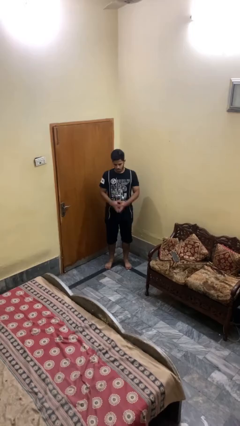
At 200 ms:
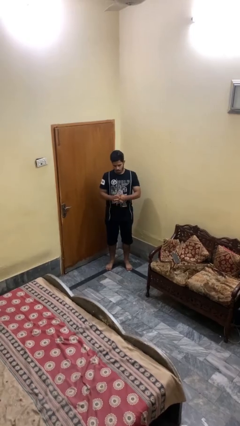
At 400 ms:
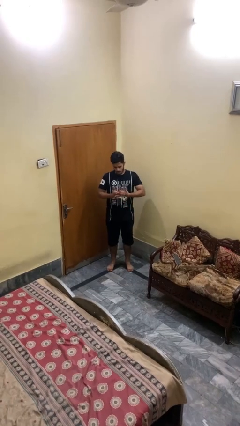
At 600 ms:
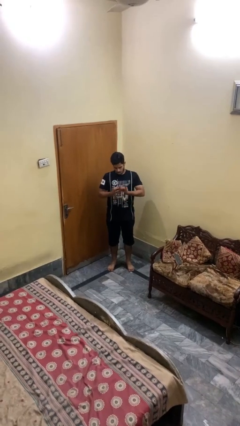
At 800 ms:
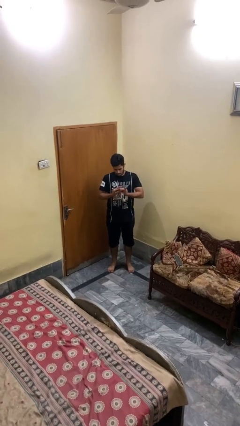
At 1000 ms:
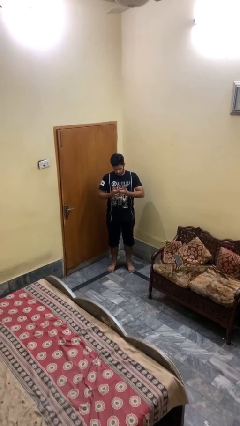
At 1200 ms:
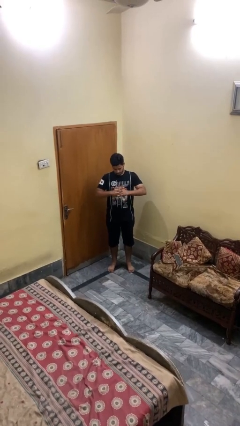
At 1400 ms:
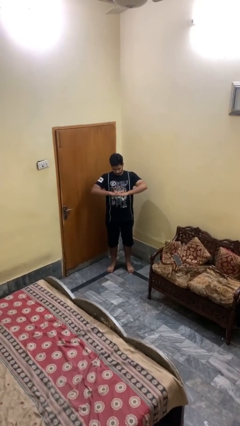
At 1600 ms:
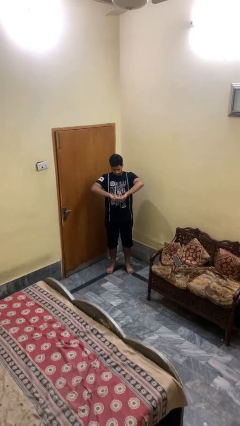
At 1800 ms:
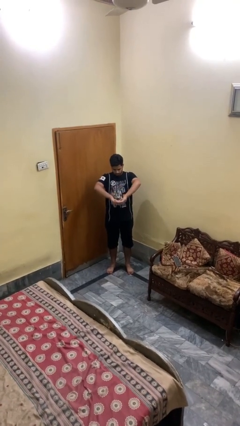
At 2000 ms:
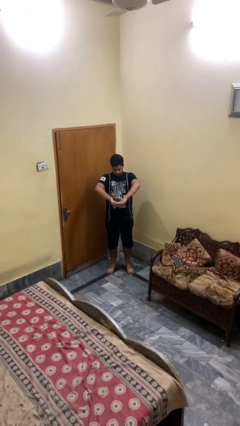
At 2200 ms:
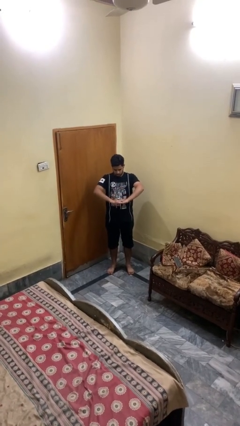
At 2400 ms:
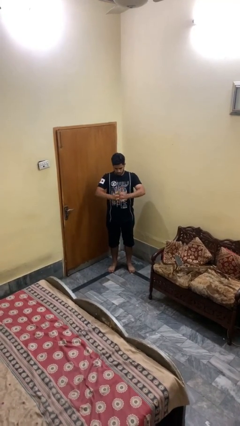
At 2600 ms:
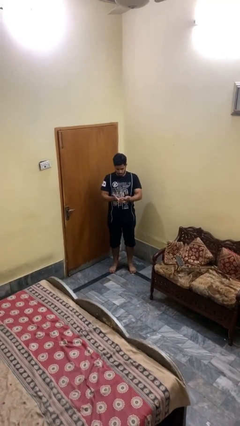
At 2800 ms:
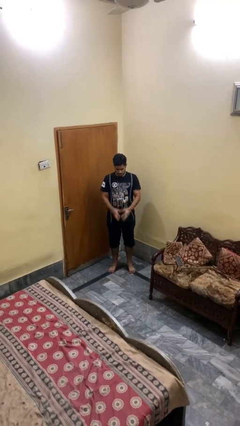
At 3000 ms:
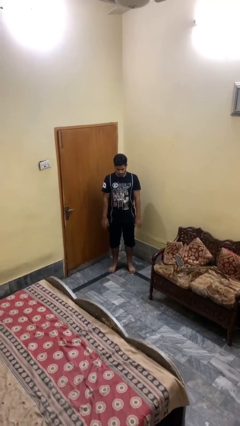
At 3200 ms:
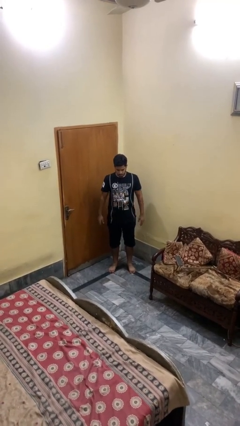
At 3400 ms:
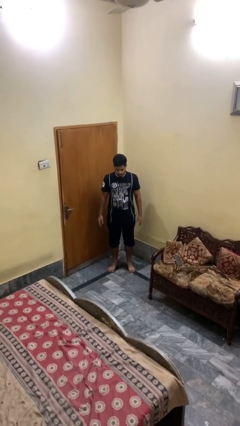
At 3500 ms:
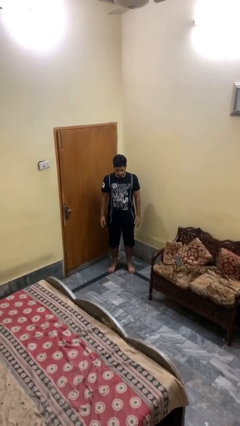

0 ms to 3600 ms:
person cracks knuckles

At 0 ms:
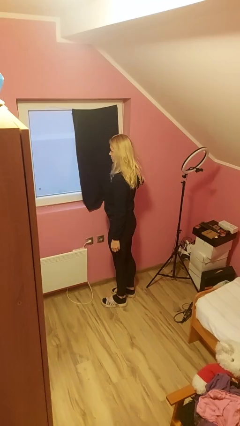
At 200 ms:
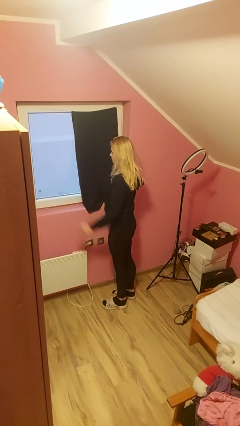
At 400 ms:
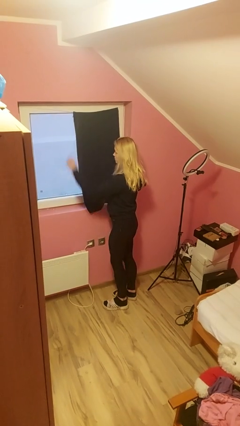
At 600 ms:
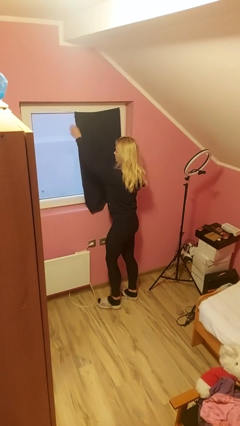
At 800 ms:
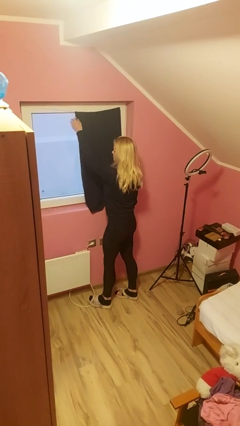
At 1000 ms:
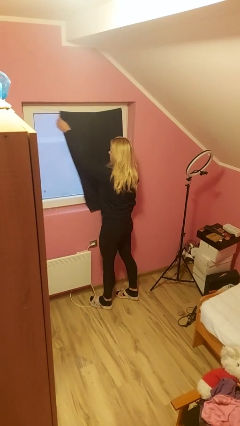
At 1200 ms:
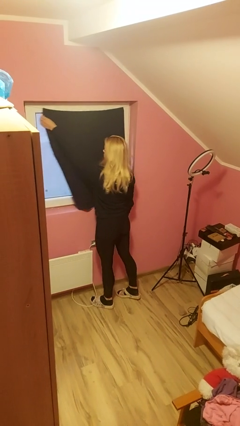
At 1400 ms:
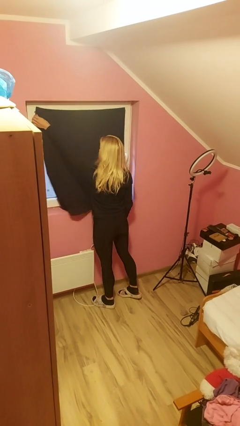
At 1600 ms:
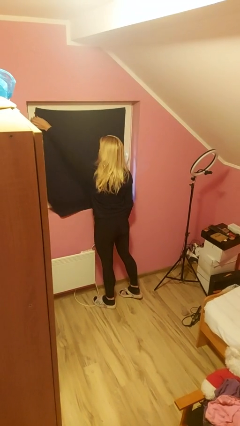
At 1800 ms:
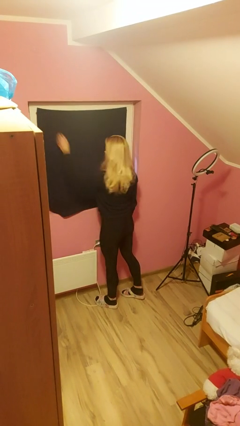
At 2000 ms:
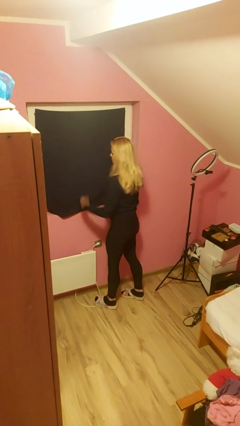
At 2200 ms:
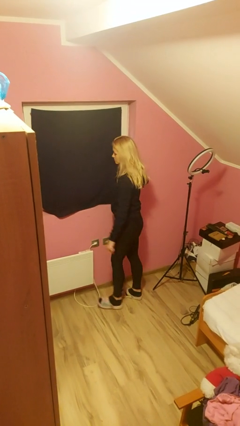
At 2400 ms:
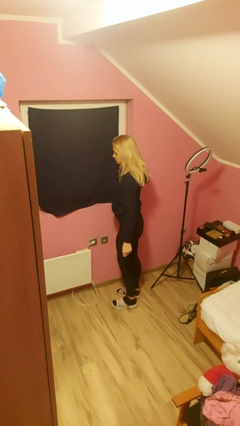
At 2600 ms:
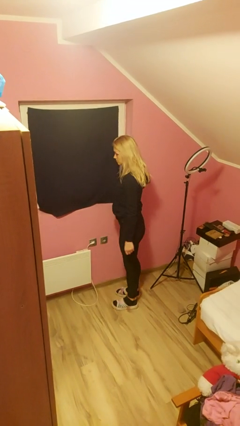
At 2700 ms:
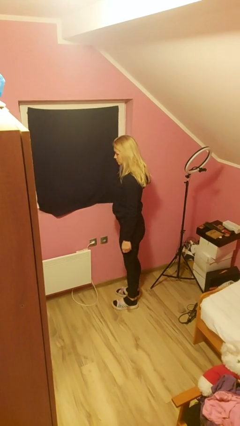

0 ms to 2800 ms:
person closes curtains

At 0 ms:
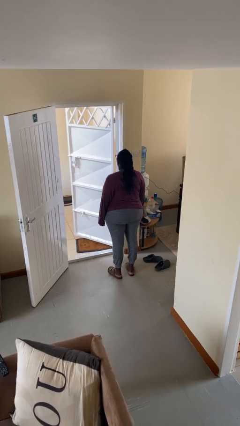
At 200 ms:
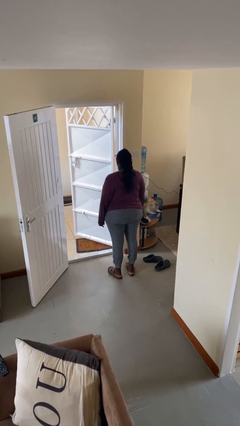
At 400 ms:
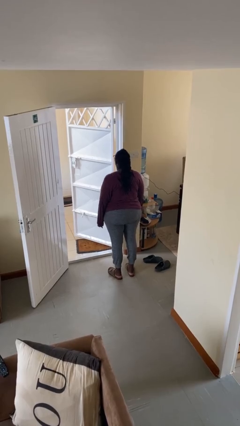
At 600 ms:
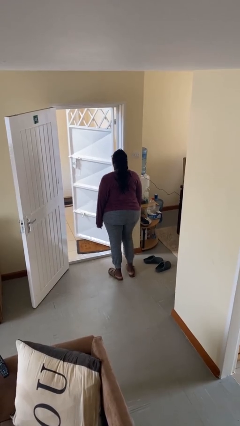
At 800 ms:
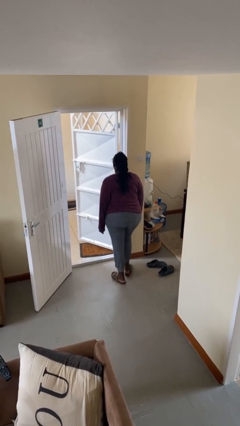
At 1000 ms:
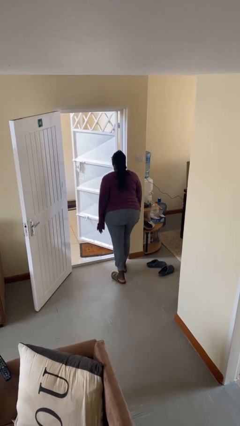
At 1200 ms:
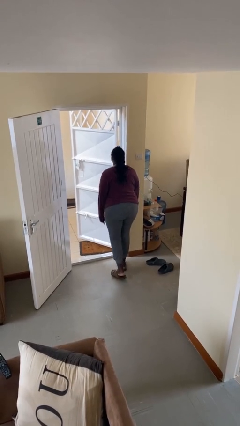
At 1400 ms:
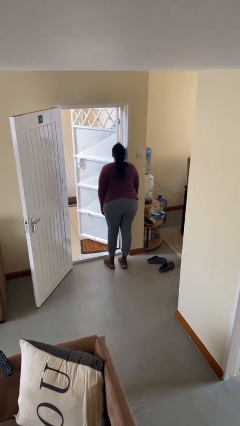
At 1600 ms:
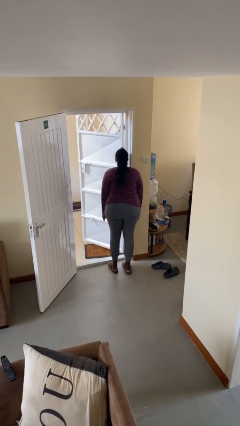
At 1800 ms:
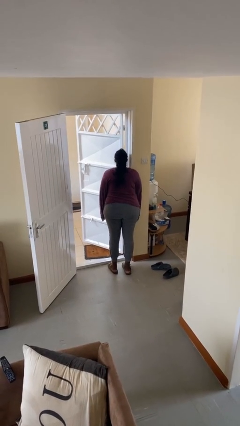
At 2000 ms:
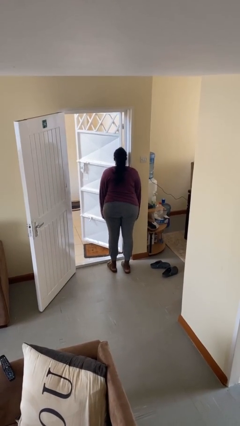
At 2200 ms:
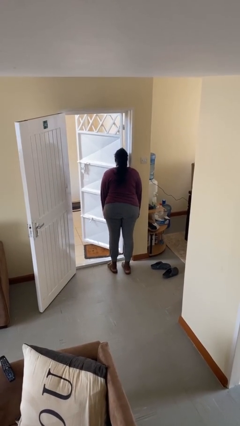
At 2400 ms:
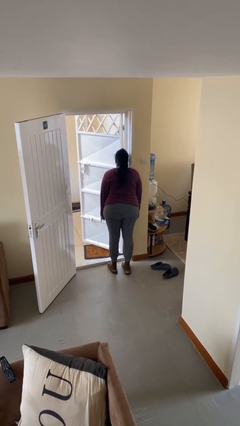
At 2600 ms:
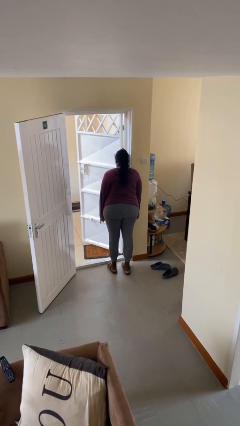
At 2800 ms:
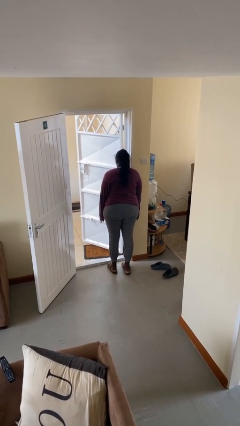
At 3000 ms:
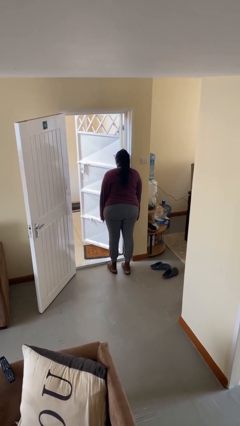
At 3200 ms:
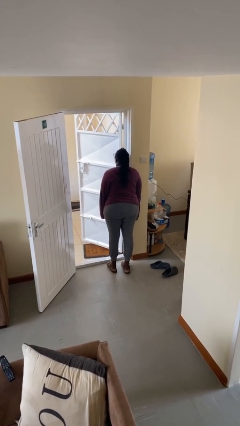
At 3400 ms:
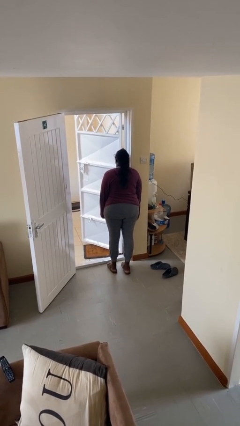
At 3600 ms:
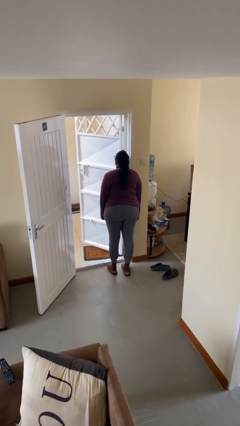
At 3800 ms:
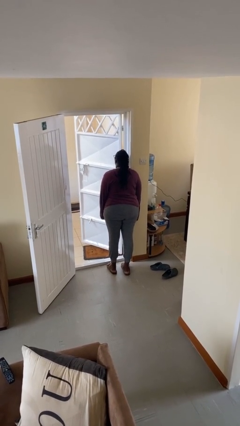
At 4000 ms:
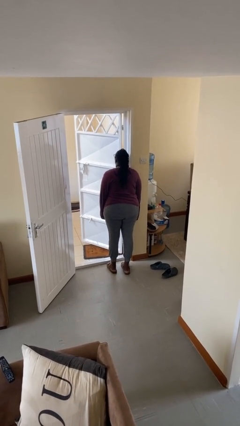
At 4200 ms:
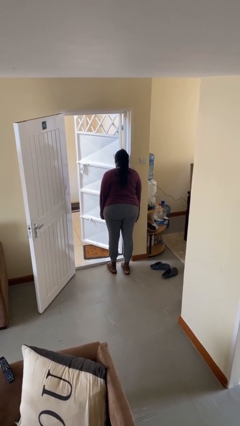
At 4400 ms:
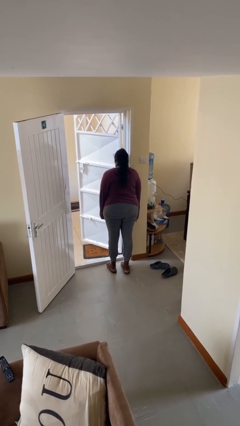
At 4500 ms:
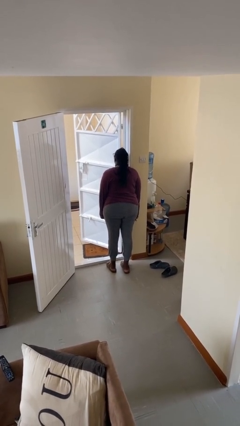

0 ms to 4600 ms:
person bumps into wall

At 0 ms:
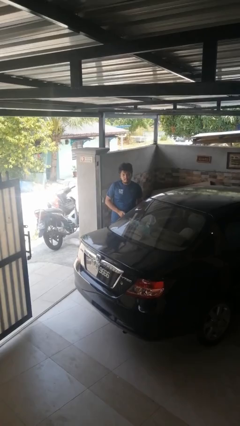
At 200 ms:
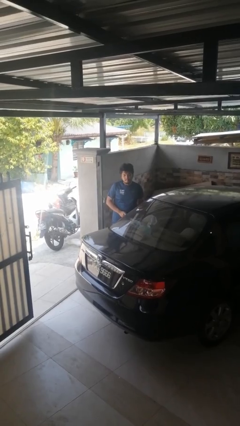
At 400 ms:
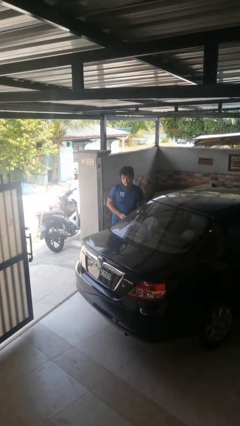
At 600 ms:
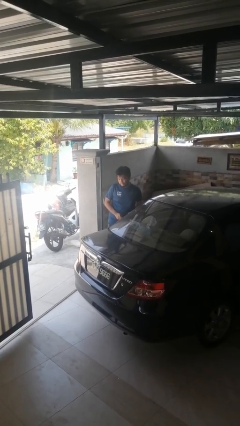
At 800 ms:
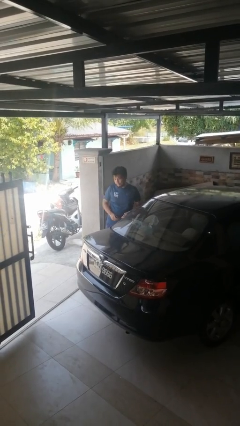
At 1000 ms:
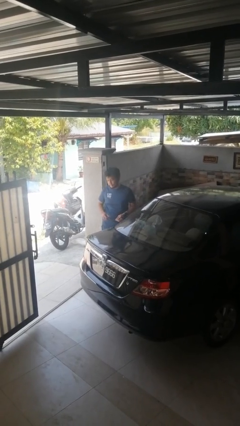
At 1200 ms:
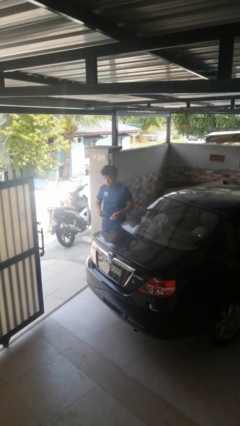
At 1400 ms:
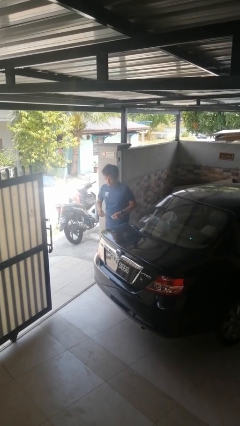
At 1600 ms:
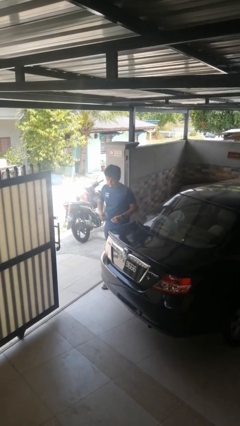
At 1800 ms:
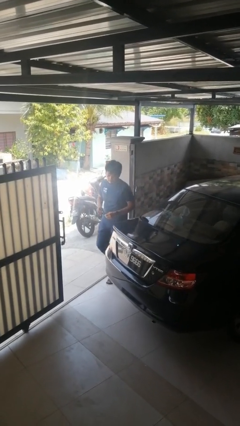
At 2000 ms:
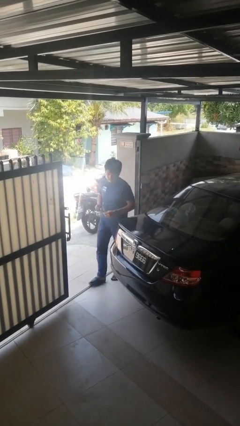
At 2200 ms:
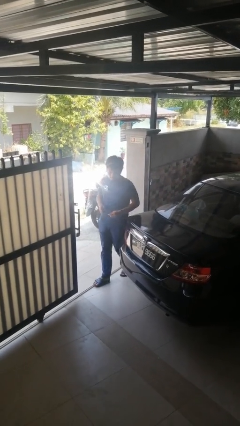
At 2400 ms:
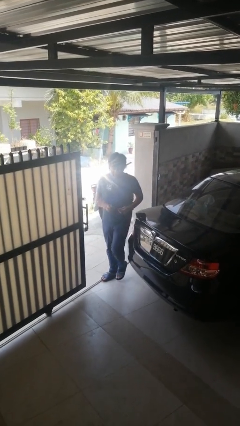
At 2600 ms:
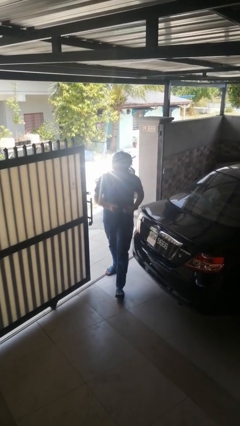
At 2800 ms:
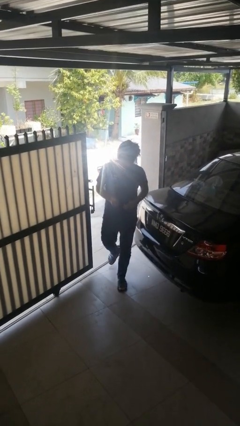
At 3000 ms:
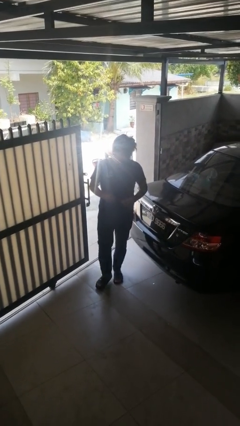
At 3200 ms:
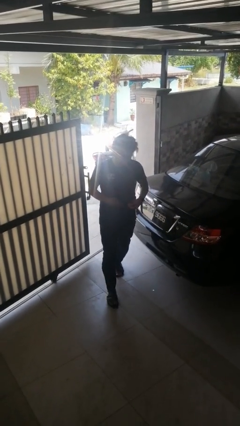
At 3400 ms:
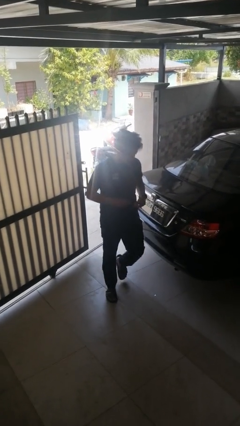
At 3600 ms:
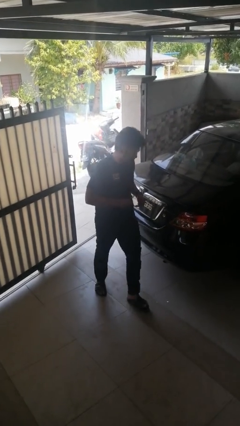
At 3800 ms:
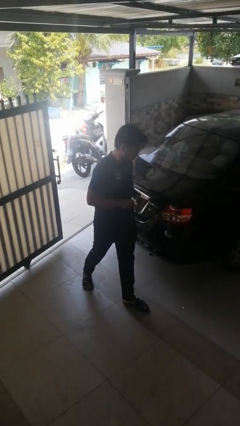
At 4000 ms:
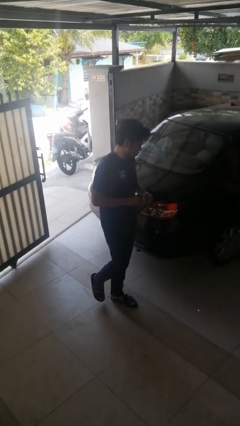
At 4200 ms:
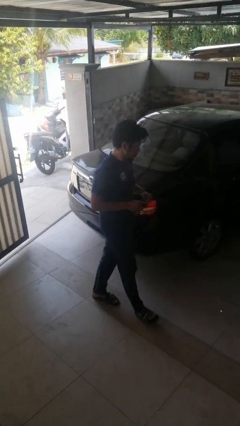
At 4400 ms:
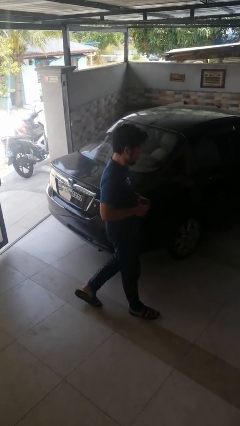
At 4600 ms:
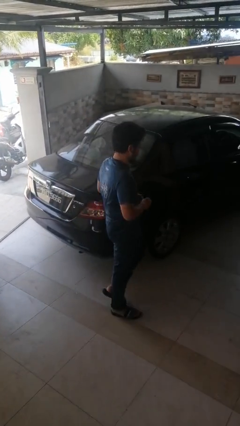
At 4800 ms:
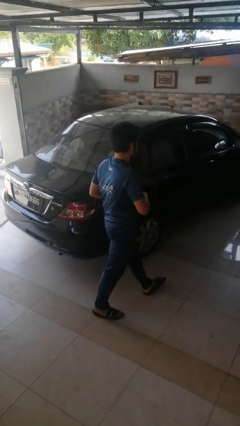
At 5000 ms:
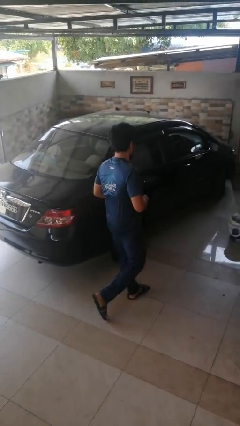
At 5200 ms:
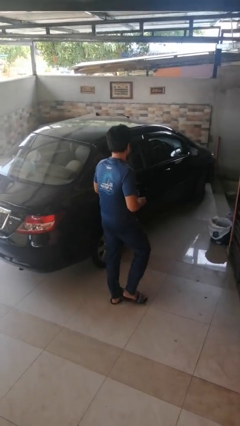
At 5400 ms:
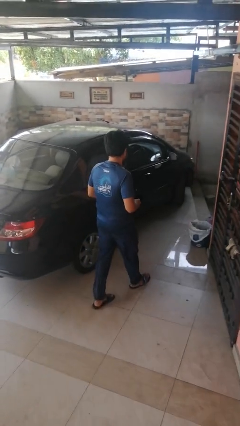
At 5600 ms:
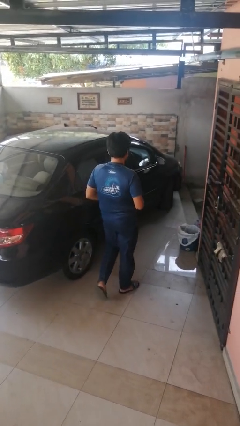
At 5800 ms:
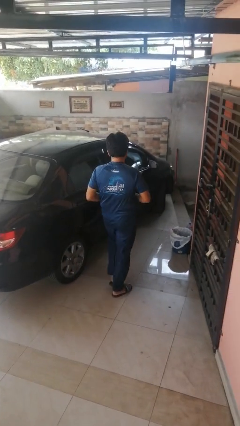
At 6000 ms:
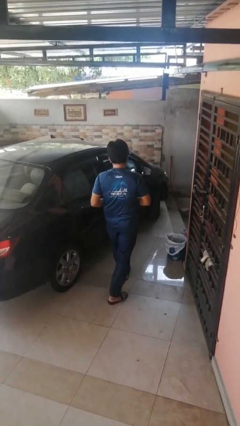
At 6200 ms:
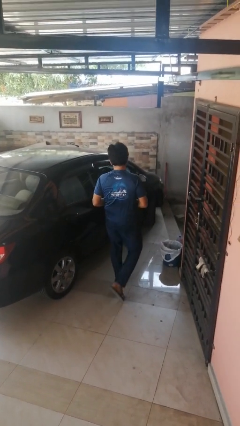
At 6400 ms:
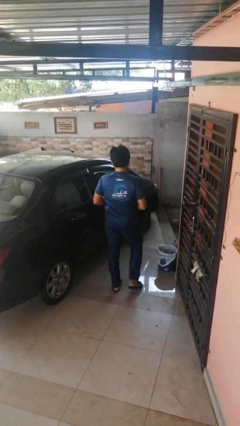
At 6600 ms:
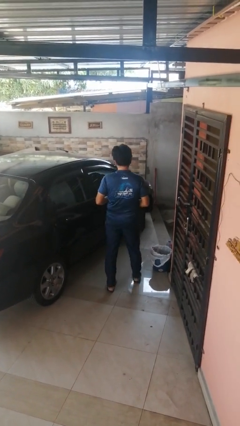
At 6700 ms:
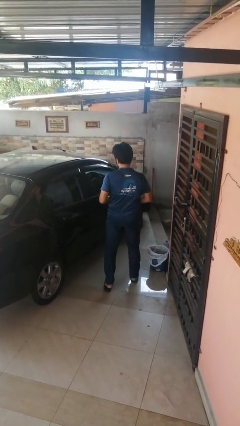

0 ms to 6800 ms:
person walks around car

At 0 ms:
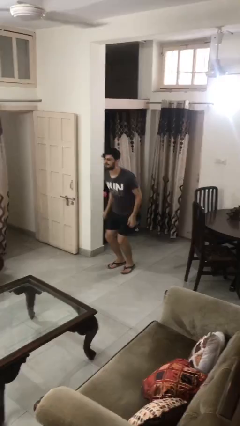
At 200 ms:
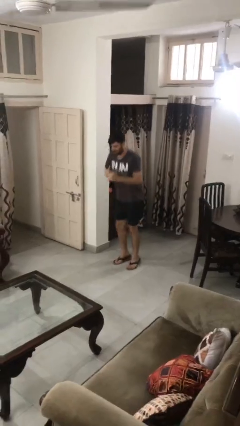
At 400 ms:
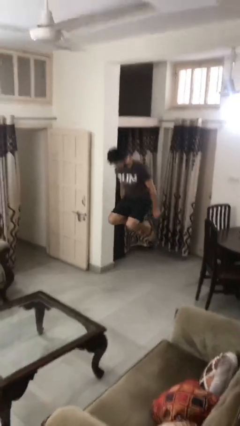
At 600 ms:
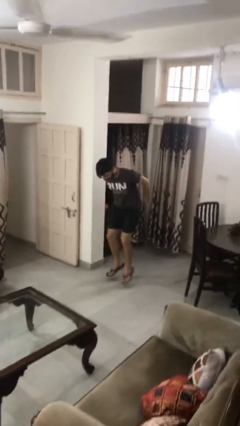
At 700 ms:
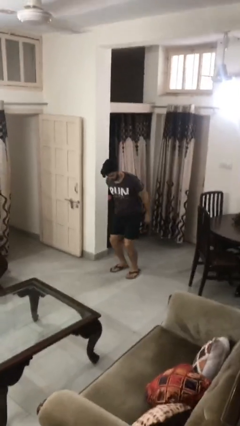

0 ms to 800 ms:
person jumps
